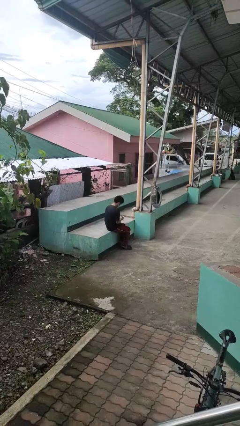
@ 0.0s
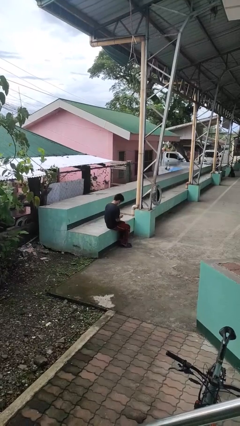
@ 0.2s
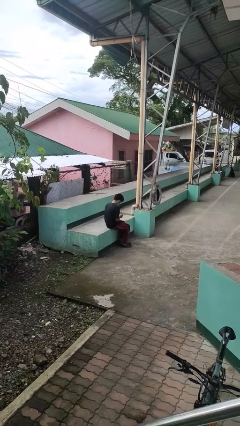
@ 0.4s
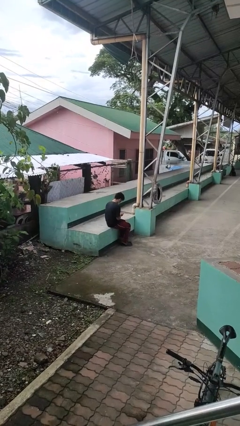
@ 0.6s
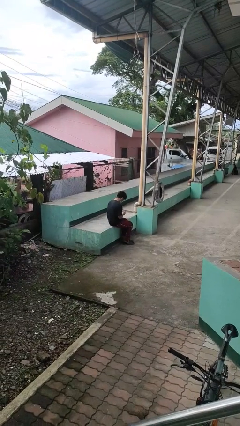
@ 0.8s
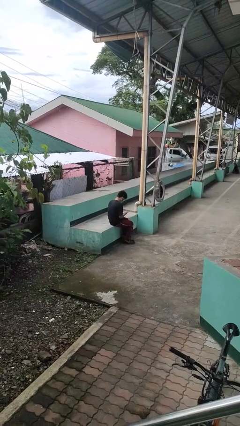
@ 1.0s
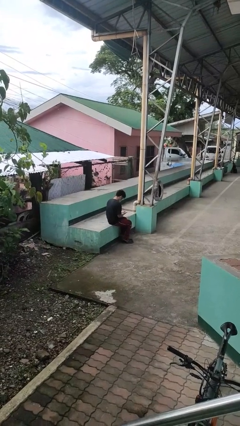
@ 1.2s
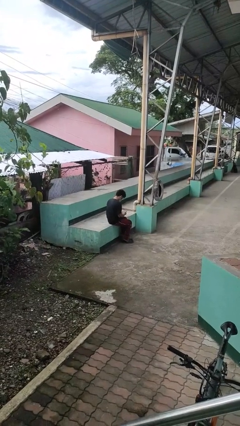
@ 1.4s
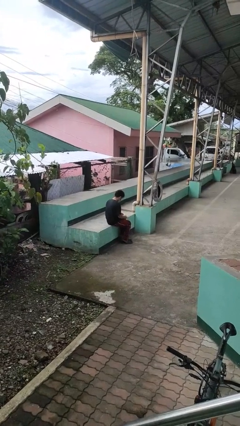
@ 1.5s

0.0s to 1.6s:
person looks at hands in lap

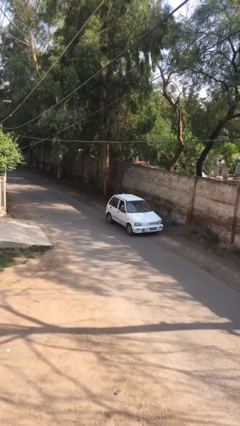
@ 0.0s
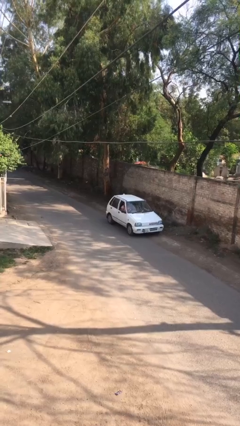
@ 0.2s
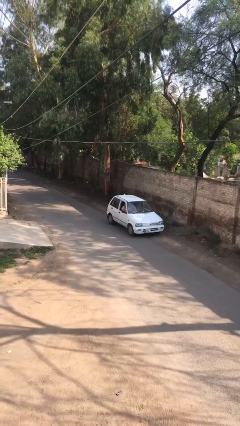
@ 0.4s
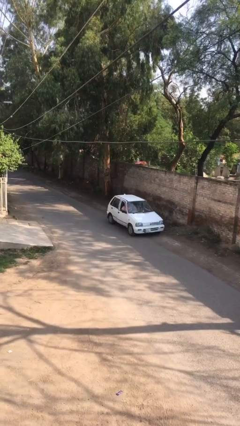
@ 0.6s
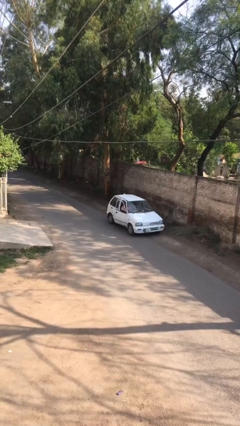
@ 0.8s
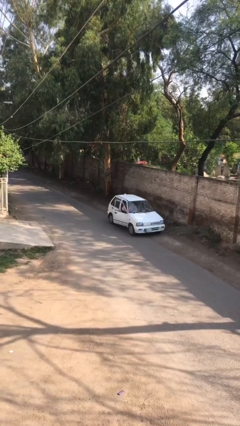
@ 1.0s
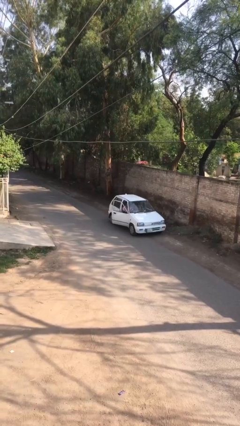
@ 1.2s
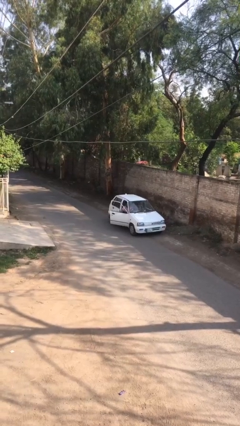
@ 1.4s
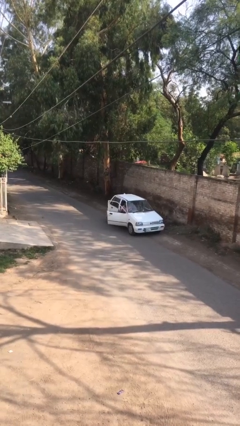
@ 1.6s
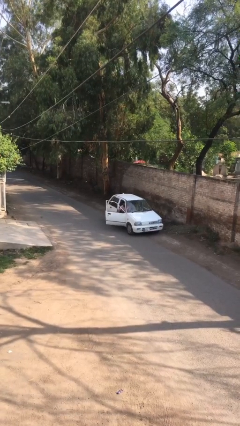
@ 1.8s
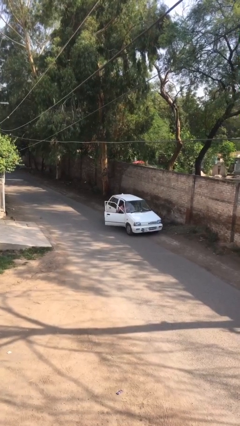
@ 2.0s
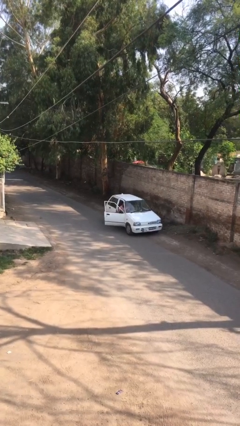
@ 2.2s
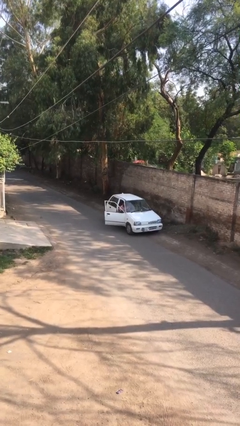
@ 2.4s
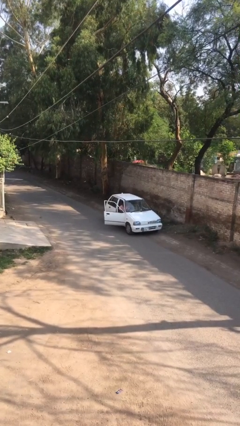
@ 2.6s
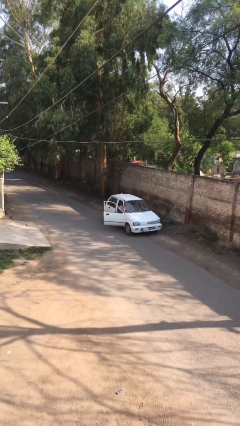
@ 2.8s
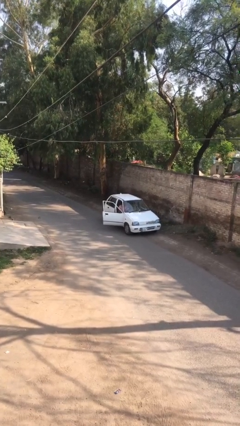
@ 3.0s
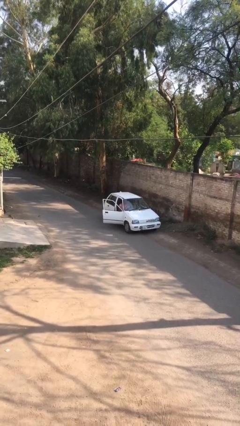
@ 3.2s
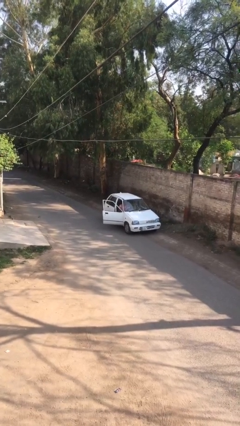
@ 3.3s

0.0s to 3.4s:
person opens car door

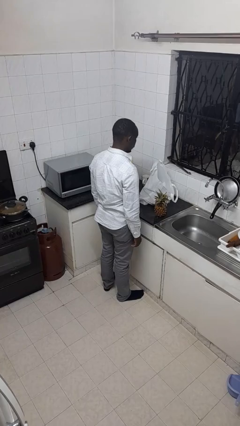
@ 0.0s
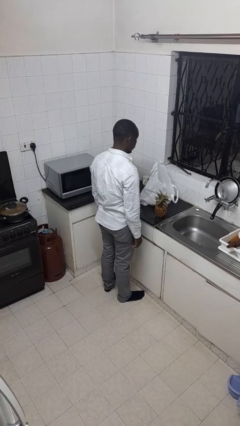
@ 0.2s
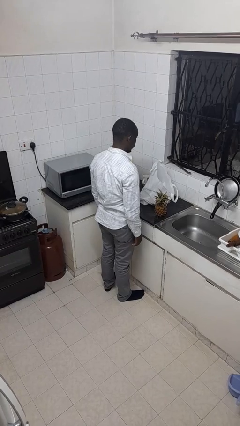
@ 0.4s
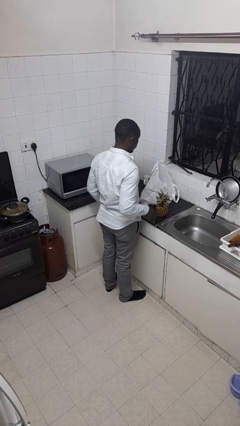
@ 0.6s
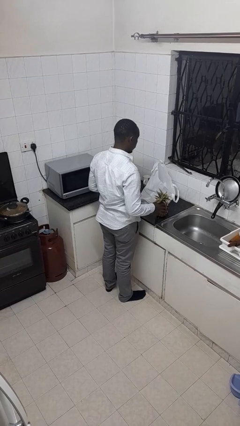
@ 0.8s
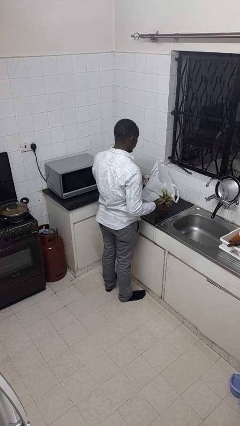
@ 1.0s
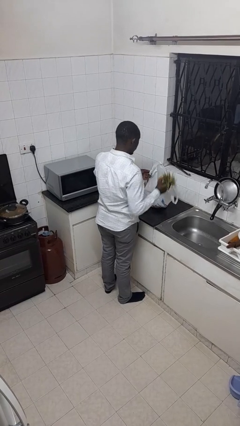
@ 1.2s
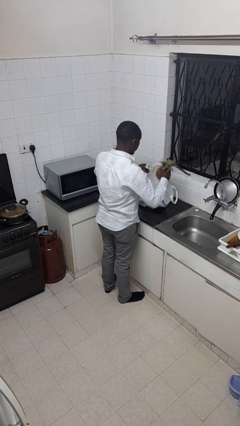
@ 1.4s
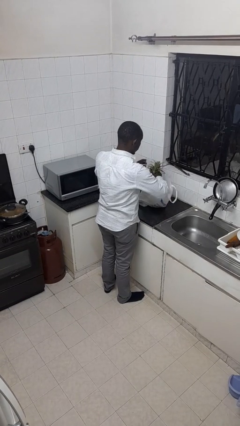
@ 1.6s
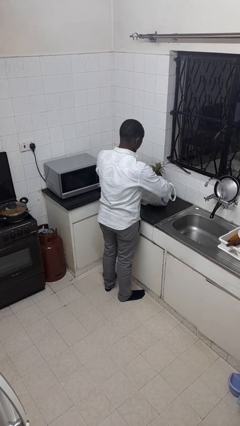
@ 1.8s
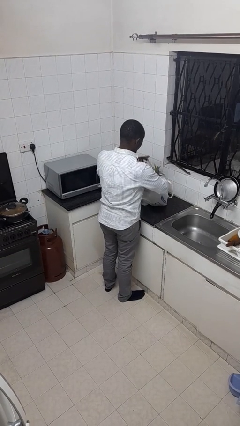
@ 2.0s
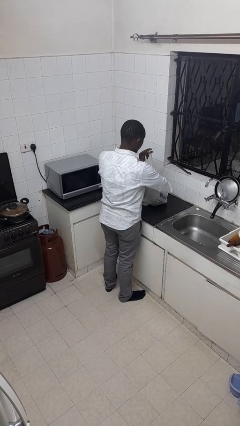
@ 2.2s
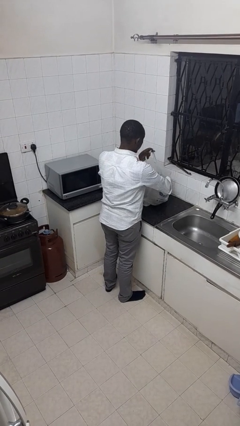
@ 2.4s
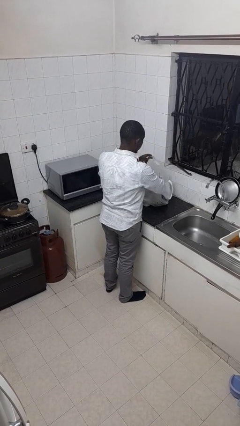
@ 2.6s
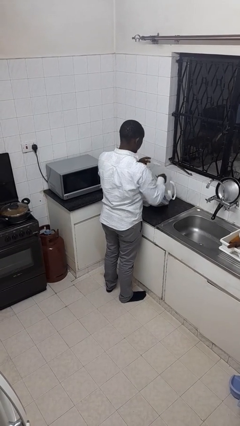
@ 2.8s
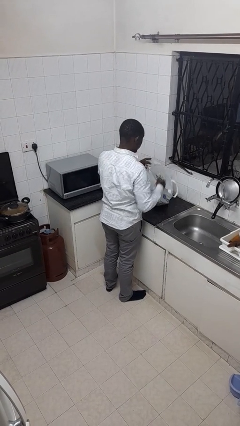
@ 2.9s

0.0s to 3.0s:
person puts object into bag

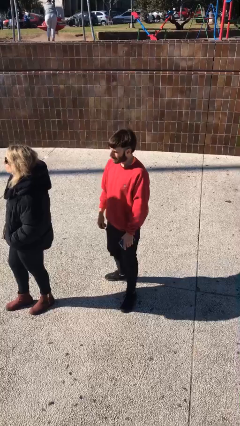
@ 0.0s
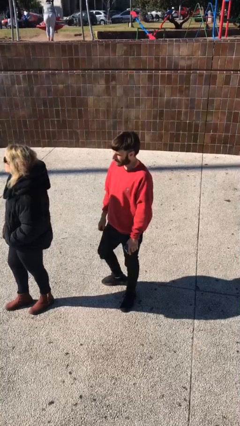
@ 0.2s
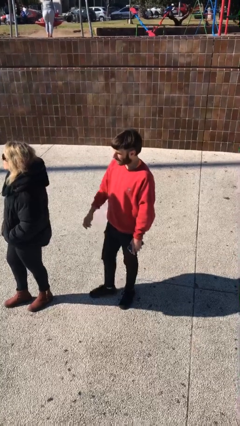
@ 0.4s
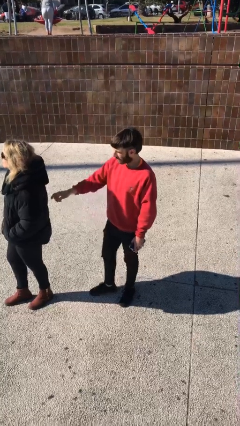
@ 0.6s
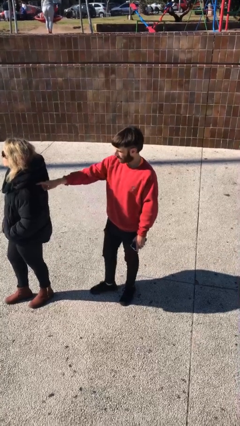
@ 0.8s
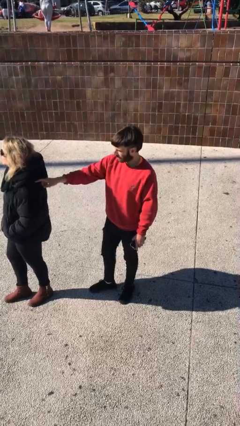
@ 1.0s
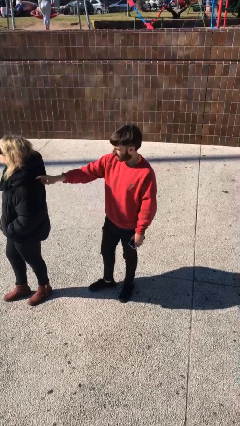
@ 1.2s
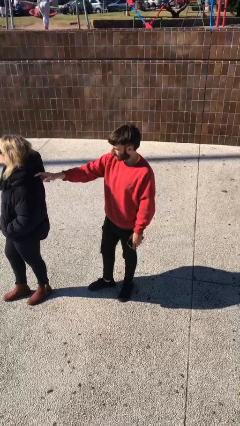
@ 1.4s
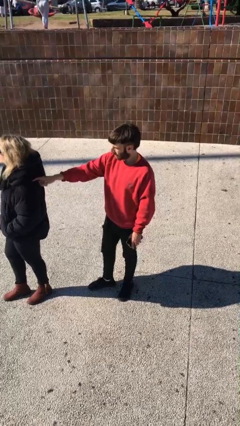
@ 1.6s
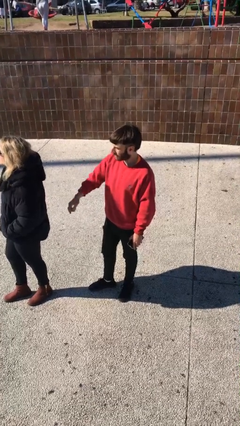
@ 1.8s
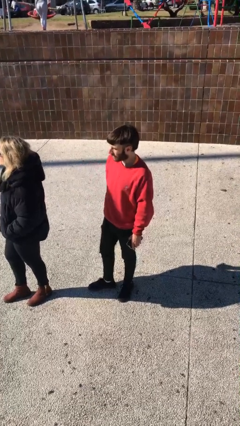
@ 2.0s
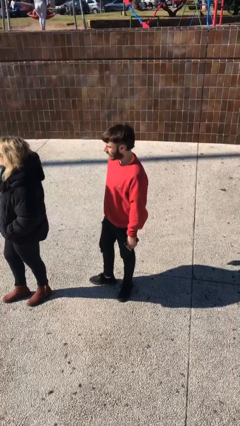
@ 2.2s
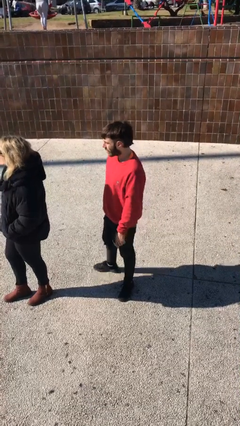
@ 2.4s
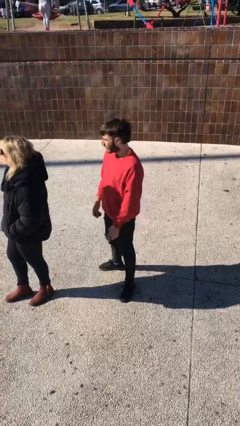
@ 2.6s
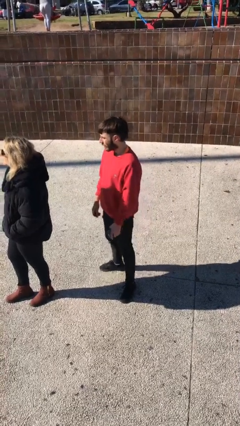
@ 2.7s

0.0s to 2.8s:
person touches back of person

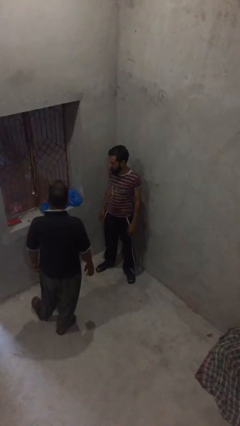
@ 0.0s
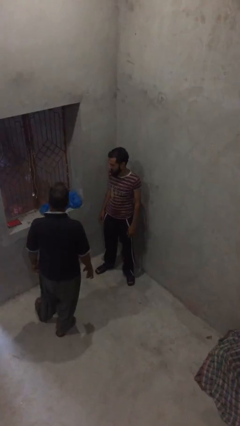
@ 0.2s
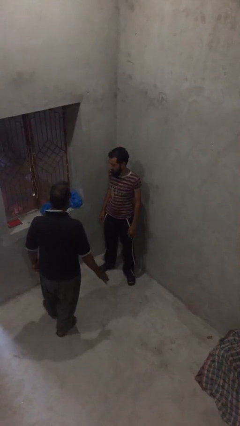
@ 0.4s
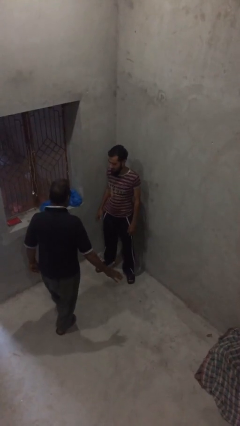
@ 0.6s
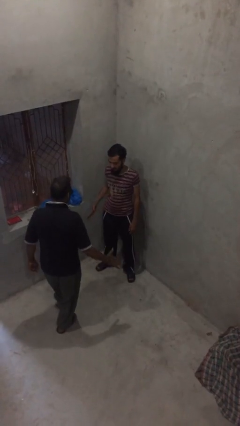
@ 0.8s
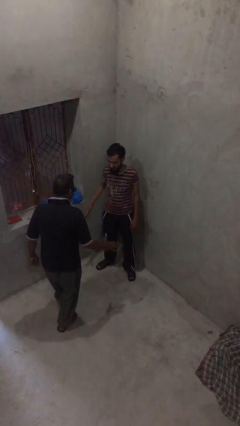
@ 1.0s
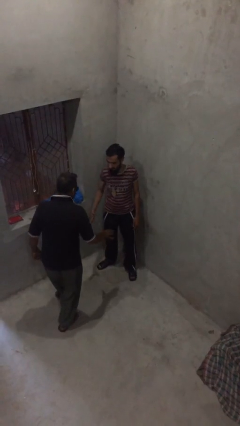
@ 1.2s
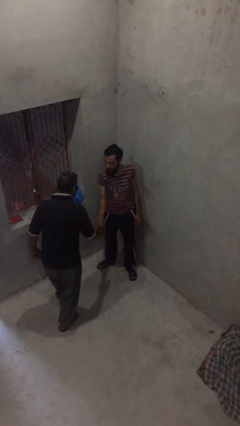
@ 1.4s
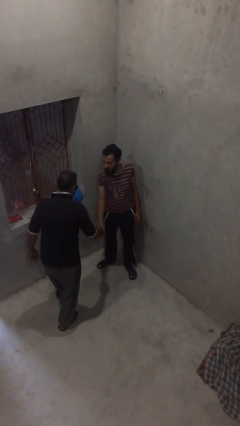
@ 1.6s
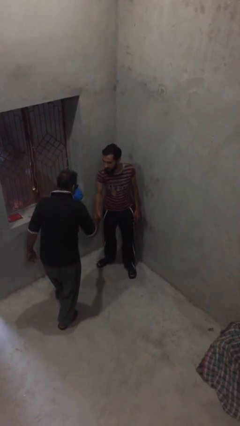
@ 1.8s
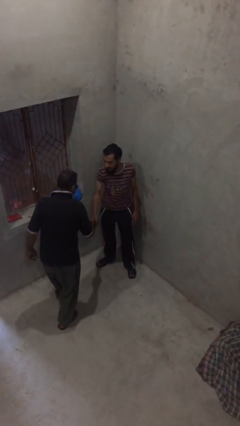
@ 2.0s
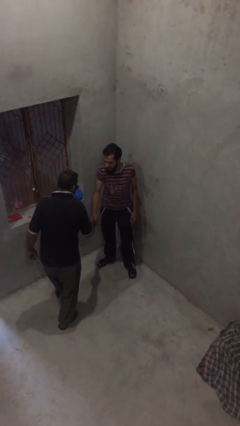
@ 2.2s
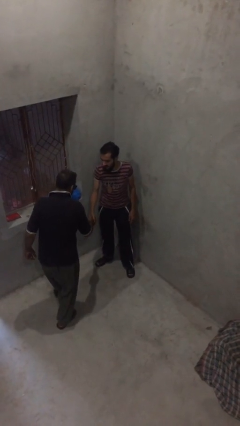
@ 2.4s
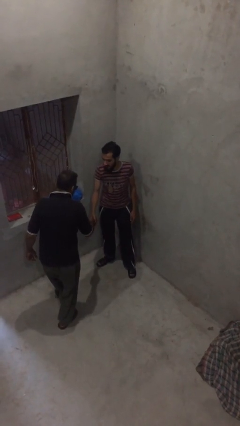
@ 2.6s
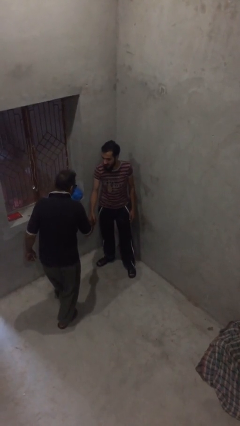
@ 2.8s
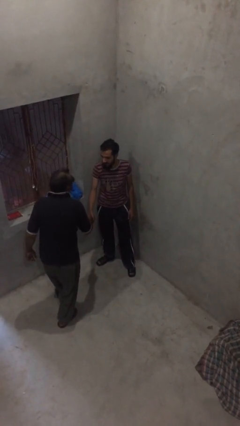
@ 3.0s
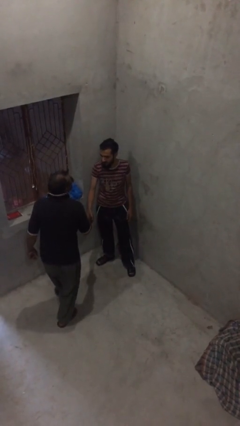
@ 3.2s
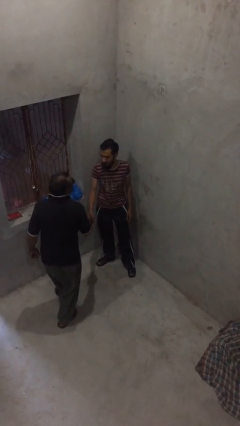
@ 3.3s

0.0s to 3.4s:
person shakes hand

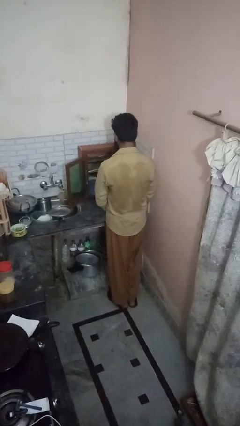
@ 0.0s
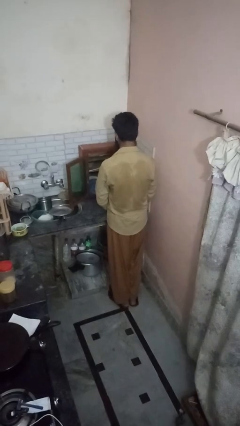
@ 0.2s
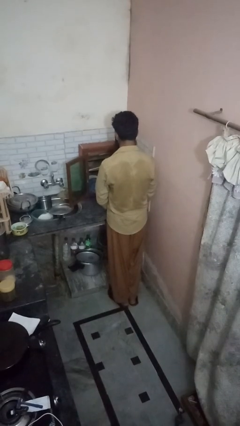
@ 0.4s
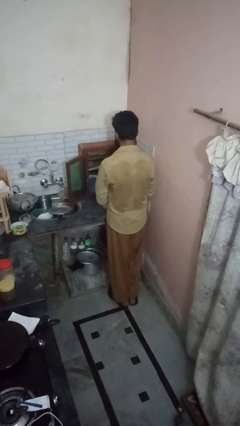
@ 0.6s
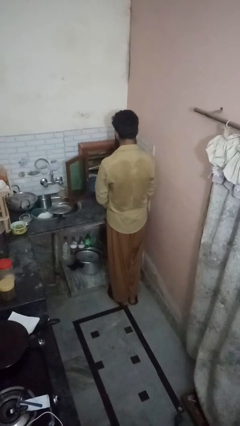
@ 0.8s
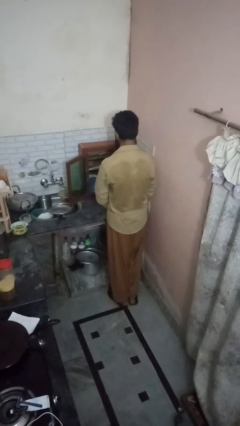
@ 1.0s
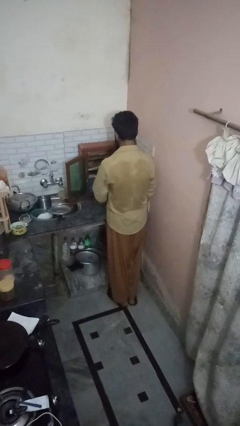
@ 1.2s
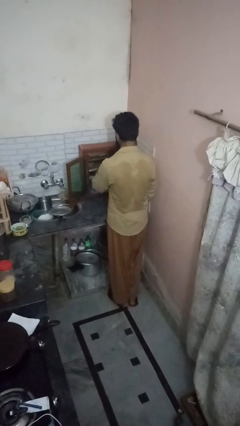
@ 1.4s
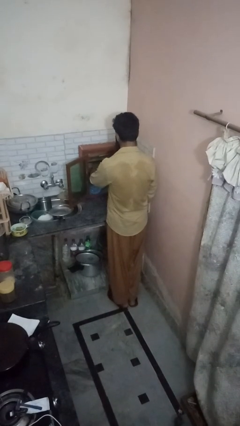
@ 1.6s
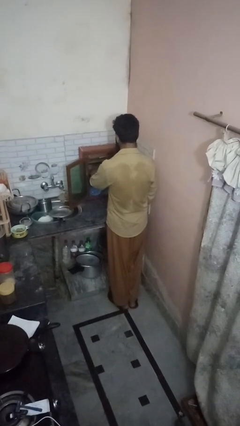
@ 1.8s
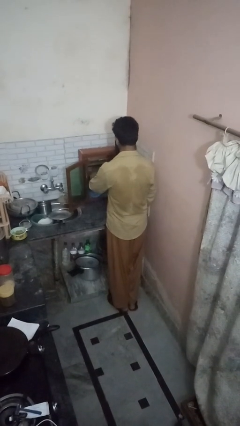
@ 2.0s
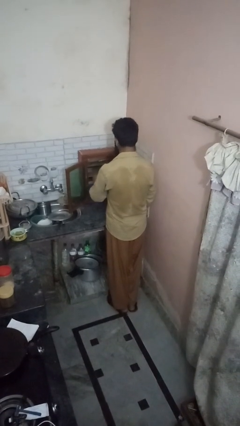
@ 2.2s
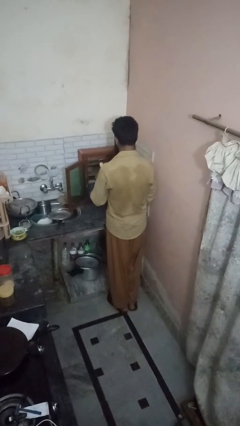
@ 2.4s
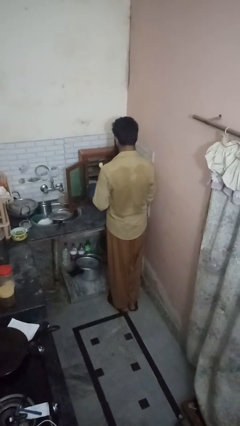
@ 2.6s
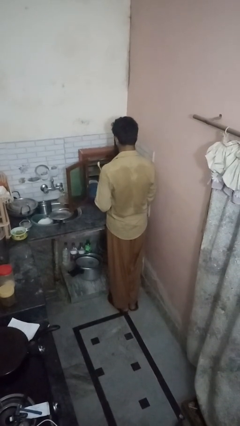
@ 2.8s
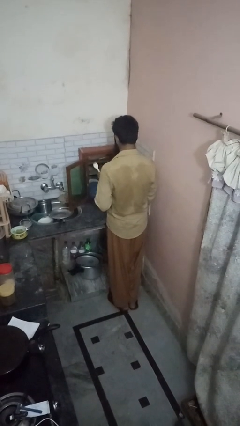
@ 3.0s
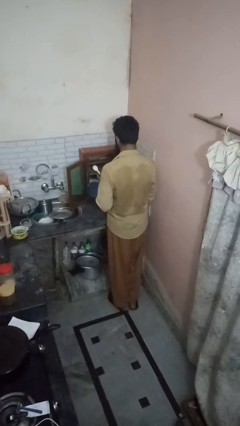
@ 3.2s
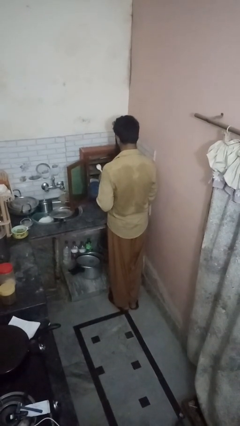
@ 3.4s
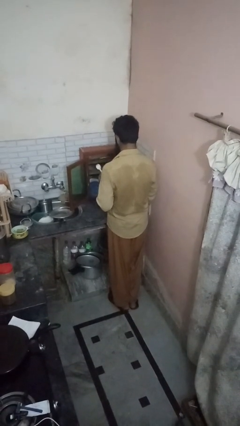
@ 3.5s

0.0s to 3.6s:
person puts object in cabinet
